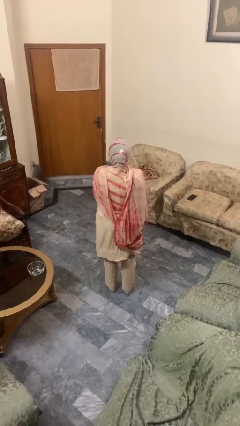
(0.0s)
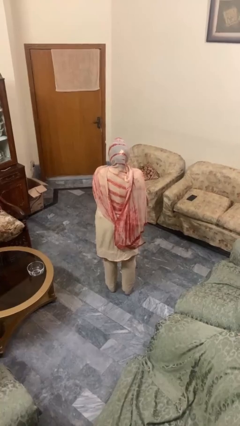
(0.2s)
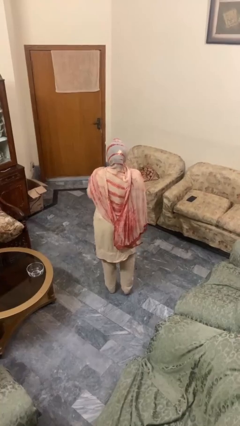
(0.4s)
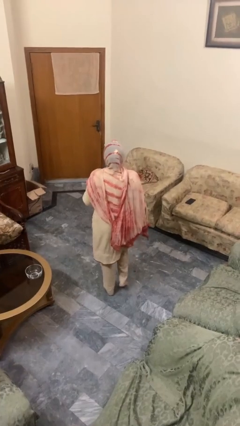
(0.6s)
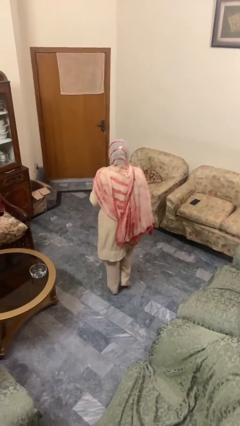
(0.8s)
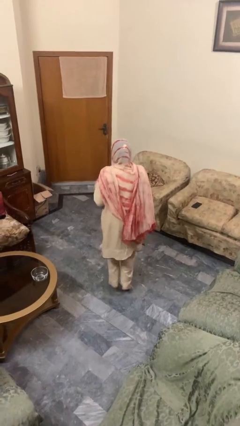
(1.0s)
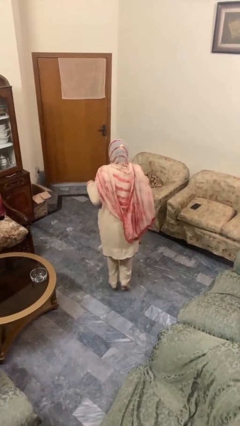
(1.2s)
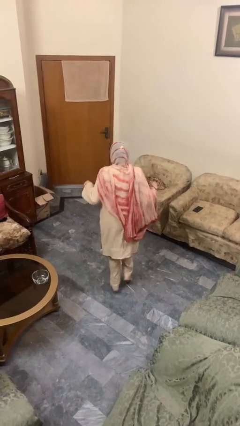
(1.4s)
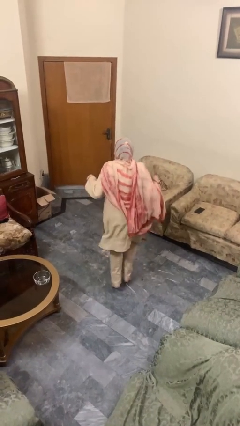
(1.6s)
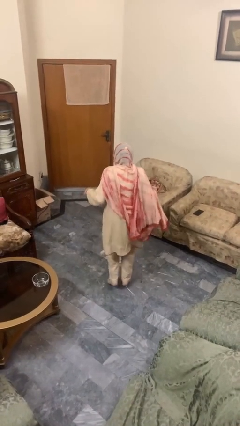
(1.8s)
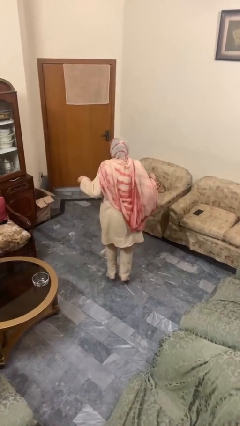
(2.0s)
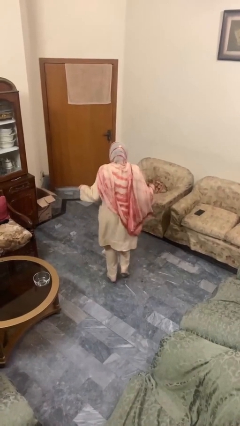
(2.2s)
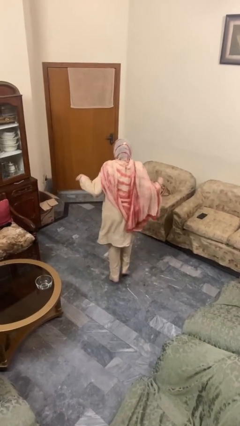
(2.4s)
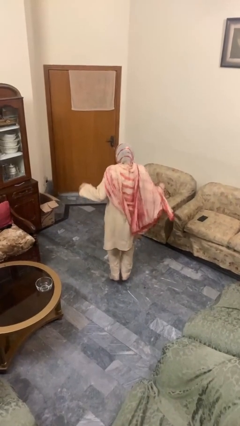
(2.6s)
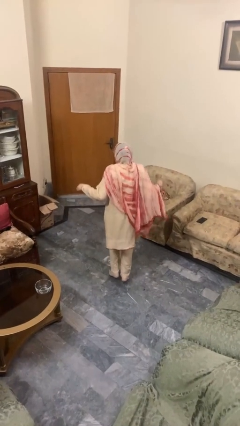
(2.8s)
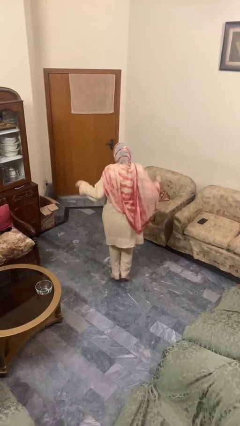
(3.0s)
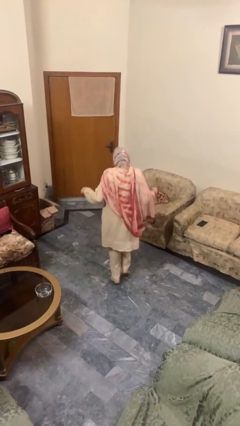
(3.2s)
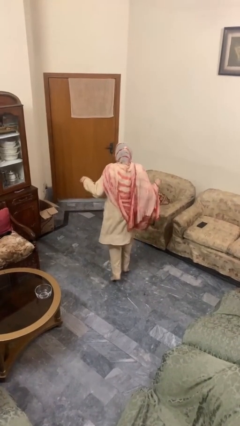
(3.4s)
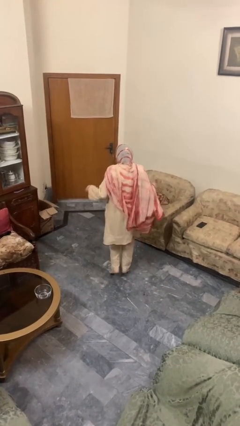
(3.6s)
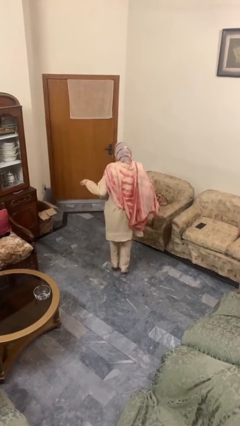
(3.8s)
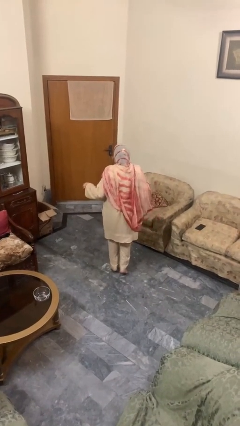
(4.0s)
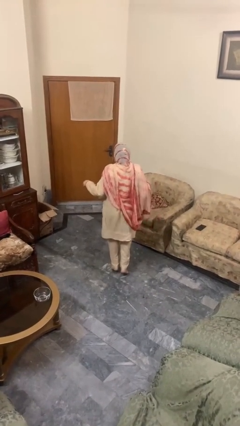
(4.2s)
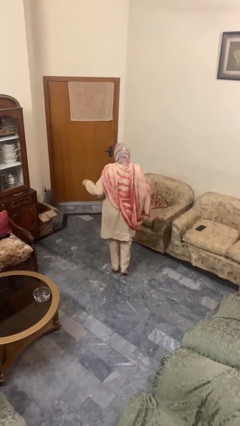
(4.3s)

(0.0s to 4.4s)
person walks tiptoe

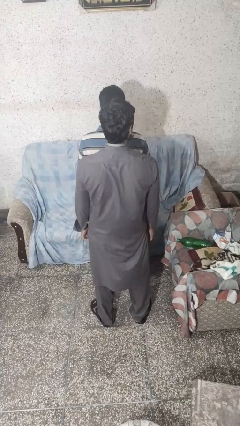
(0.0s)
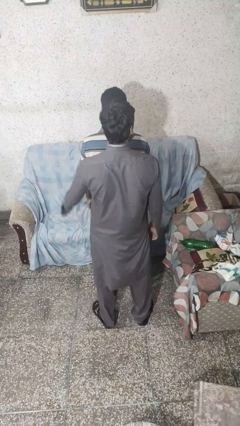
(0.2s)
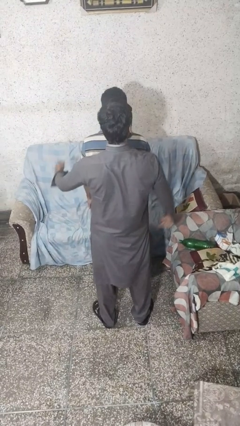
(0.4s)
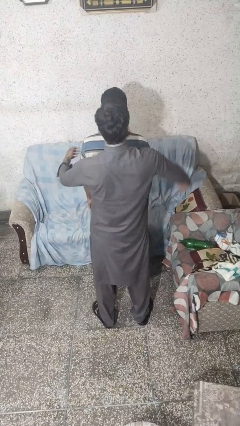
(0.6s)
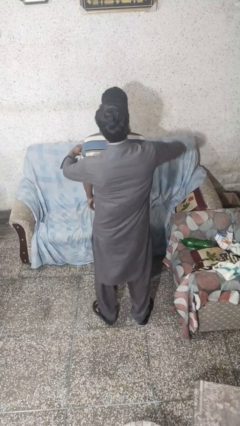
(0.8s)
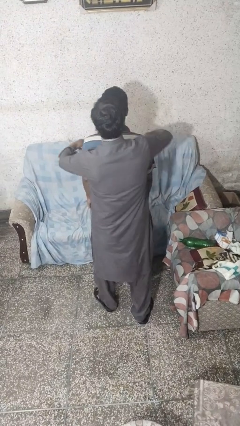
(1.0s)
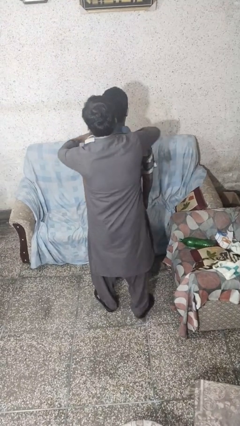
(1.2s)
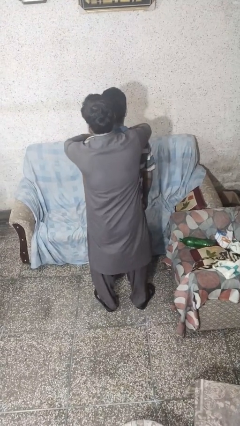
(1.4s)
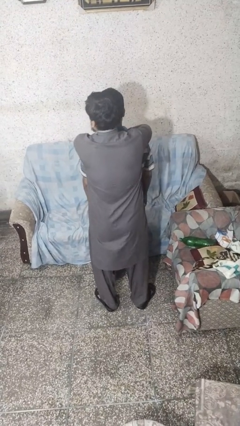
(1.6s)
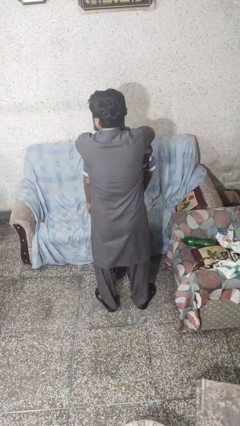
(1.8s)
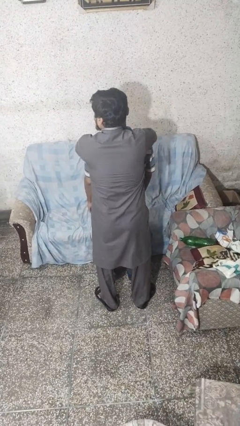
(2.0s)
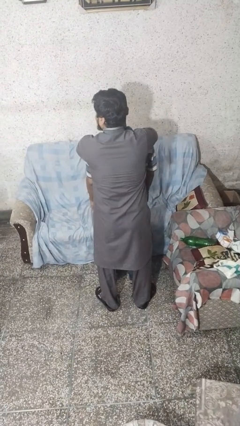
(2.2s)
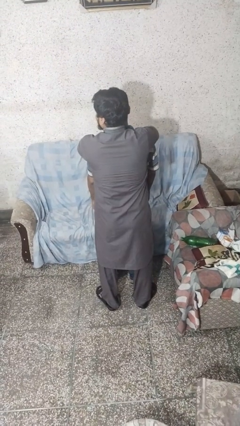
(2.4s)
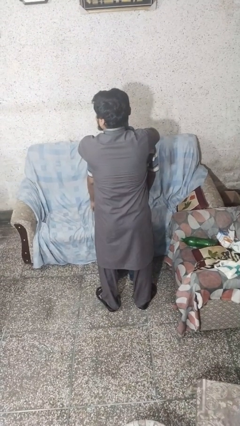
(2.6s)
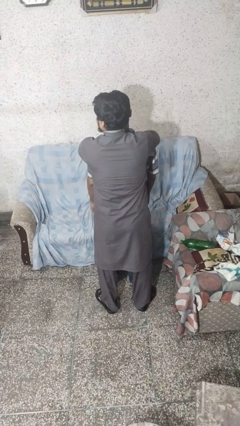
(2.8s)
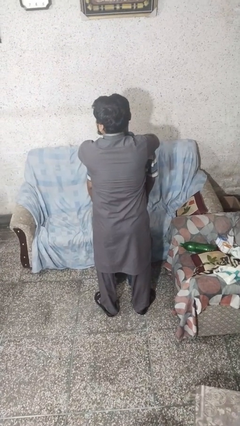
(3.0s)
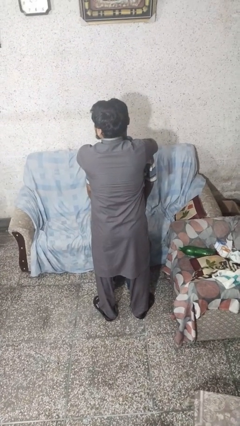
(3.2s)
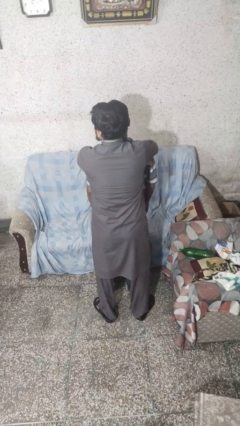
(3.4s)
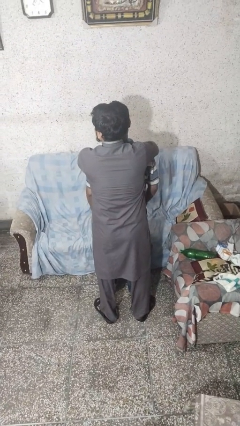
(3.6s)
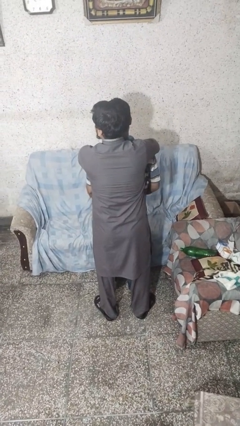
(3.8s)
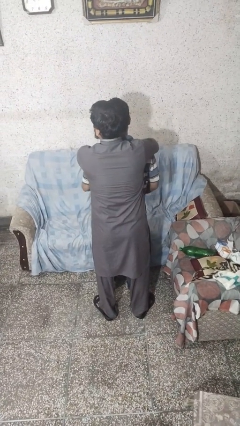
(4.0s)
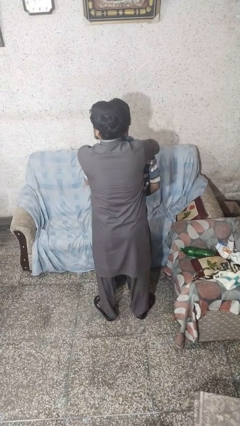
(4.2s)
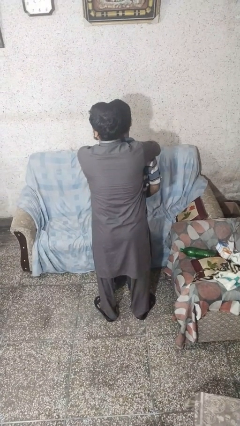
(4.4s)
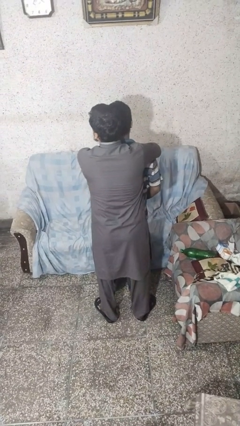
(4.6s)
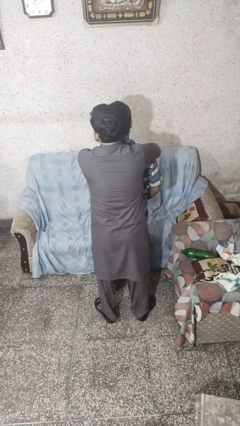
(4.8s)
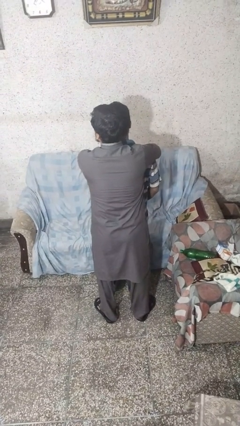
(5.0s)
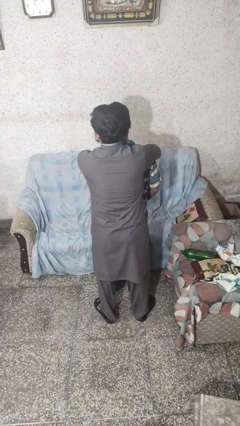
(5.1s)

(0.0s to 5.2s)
person hugs person from behind

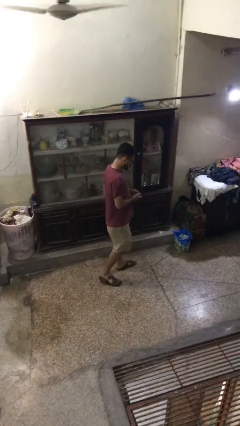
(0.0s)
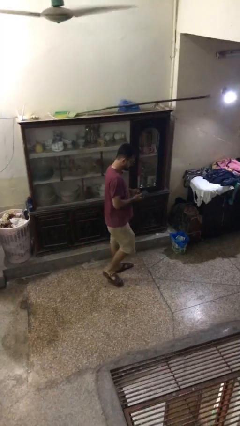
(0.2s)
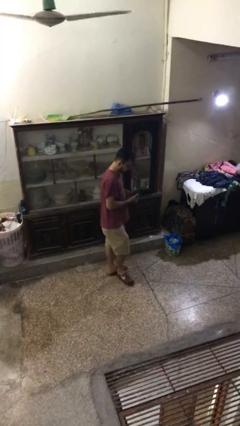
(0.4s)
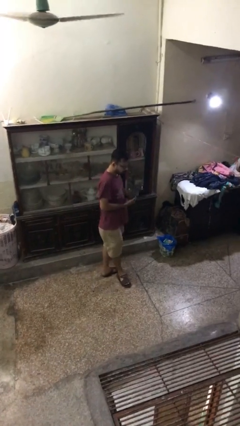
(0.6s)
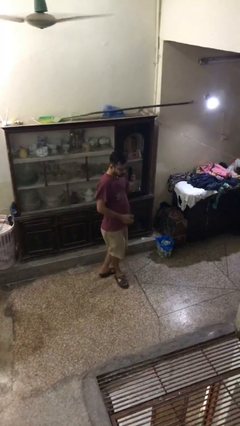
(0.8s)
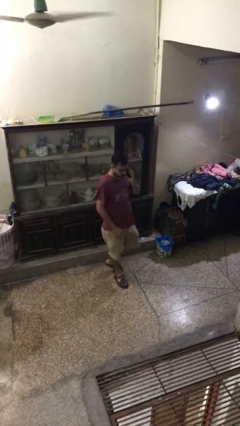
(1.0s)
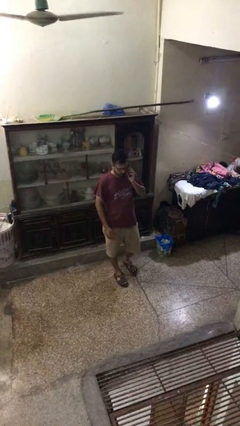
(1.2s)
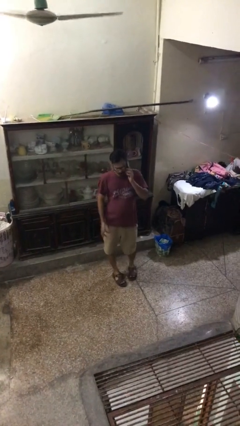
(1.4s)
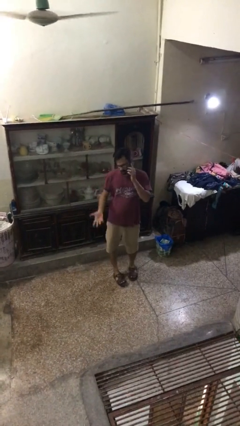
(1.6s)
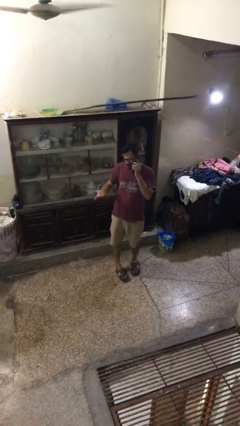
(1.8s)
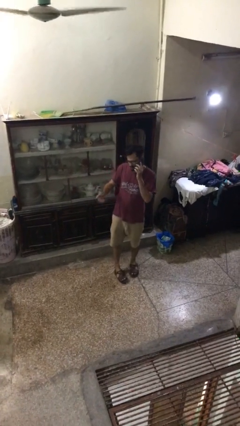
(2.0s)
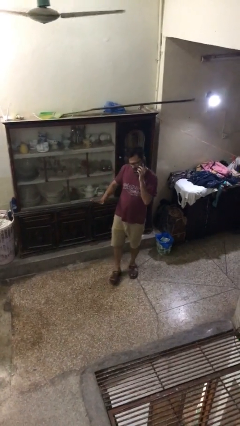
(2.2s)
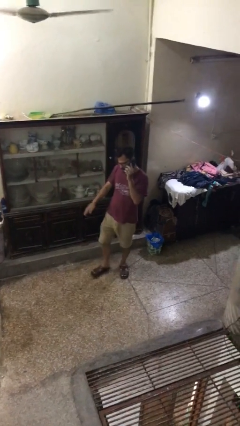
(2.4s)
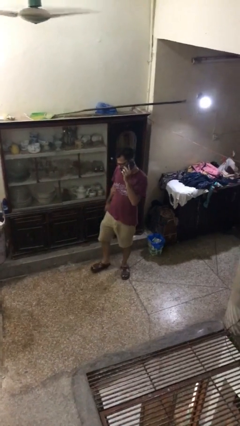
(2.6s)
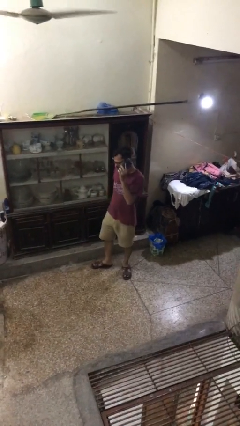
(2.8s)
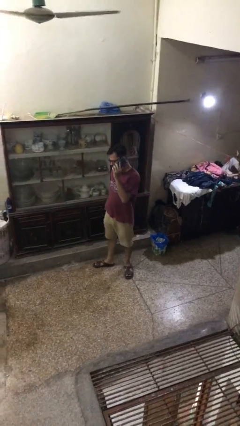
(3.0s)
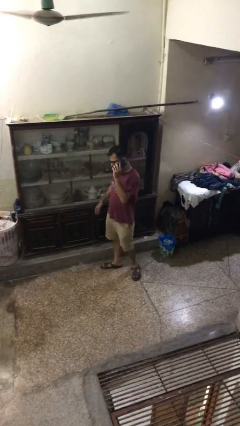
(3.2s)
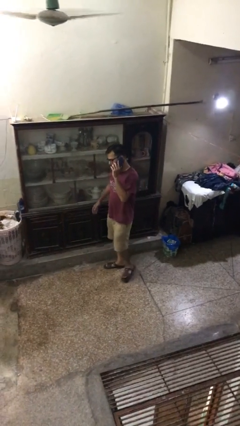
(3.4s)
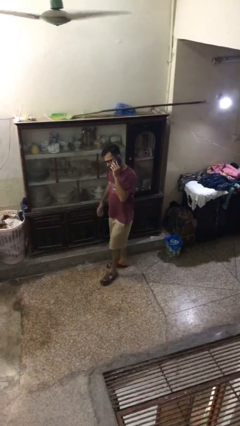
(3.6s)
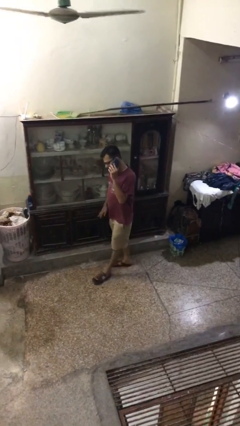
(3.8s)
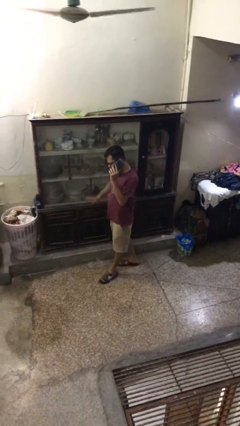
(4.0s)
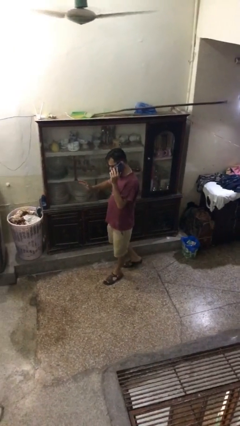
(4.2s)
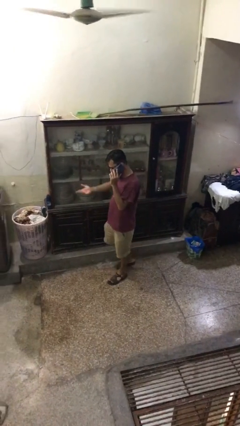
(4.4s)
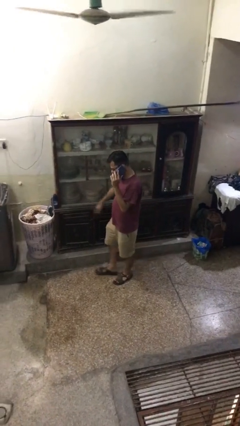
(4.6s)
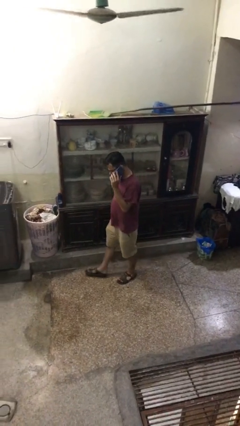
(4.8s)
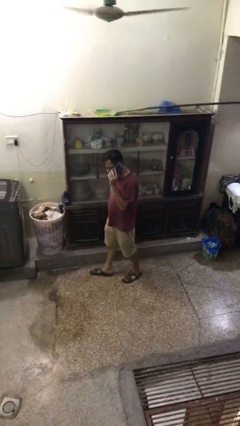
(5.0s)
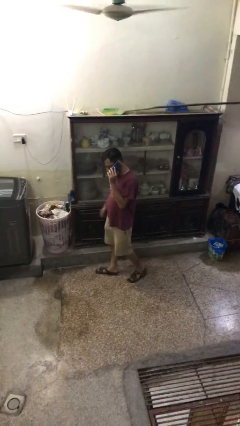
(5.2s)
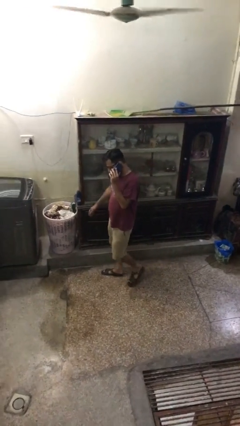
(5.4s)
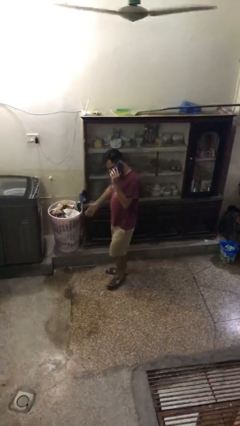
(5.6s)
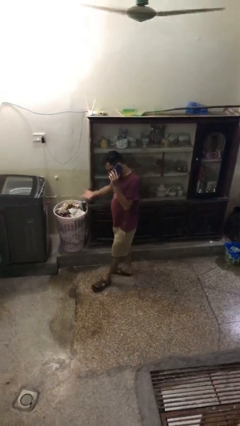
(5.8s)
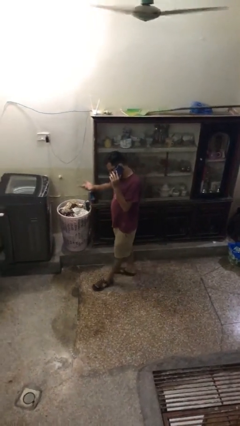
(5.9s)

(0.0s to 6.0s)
person talks on phone

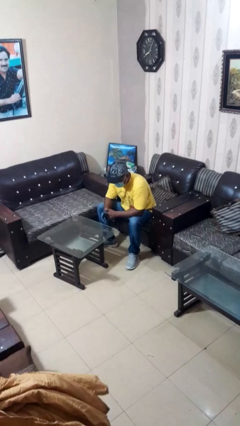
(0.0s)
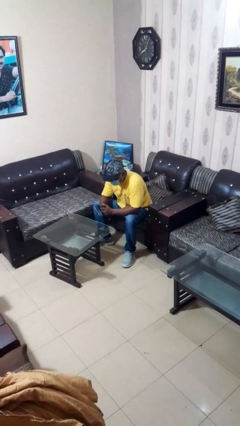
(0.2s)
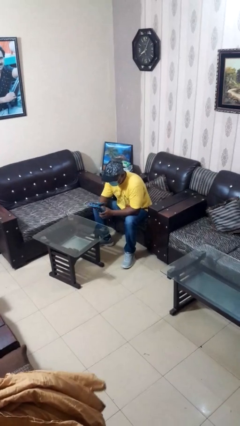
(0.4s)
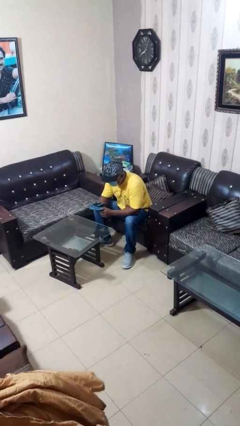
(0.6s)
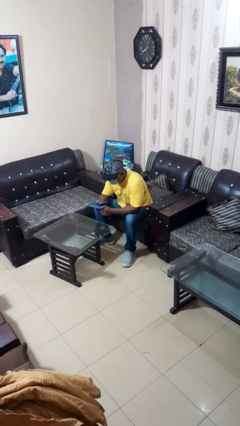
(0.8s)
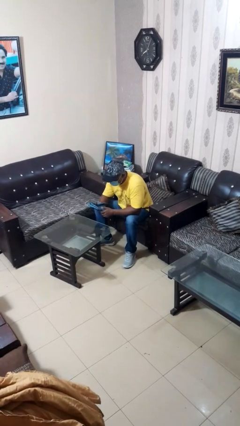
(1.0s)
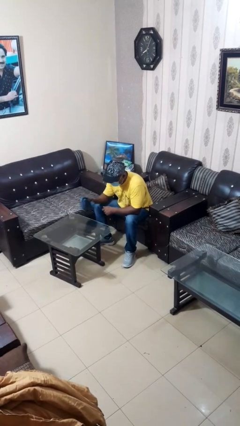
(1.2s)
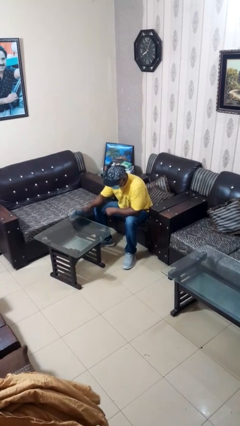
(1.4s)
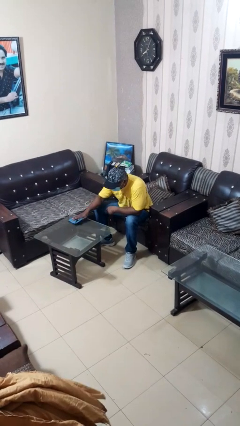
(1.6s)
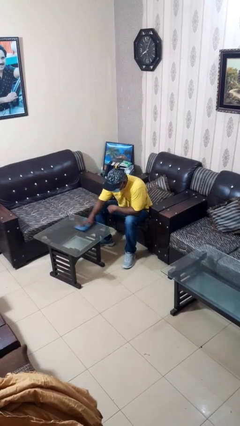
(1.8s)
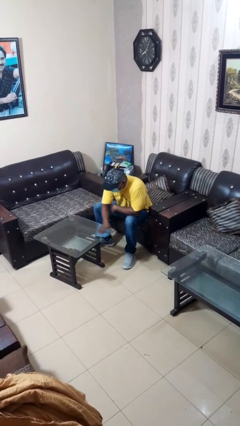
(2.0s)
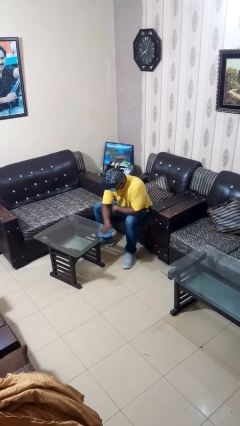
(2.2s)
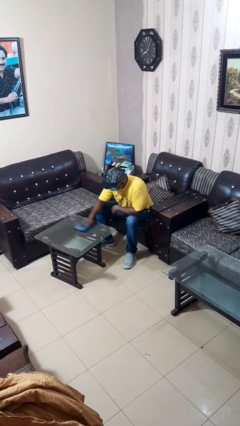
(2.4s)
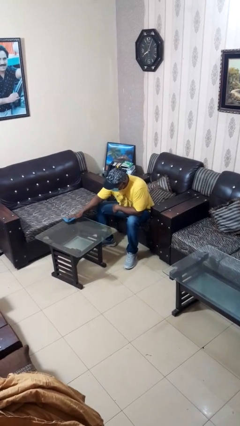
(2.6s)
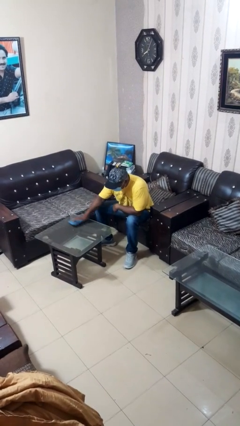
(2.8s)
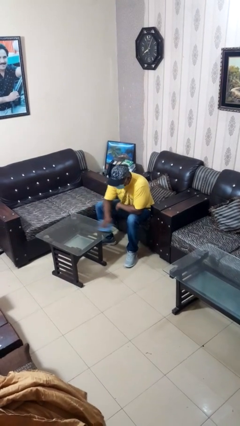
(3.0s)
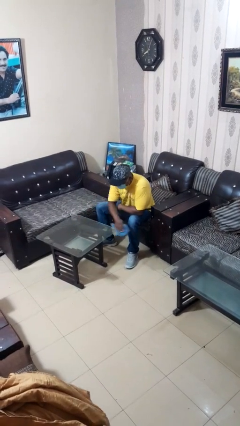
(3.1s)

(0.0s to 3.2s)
person cleans table with rag
